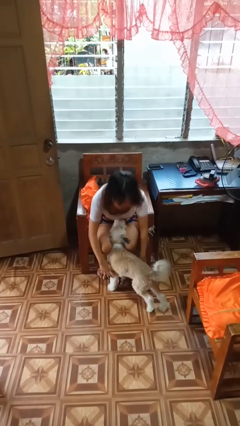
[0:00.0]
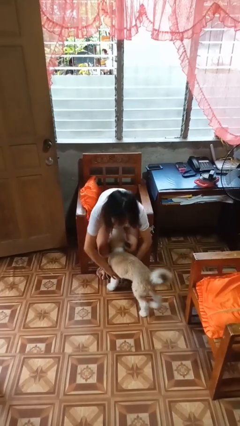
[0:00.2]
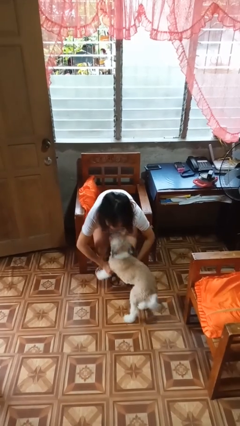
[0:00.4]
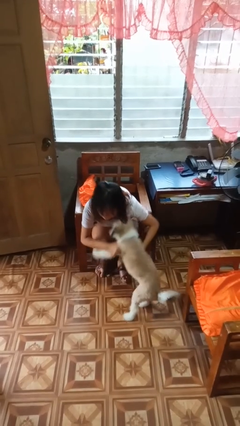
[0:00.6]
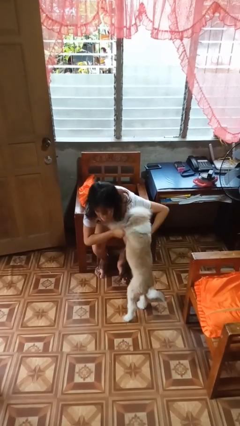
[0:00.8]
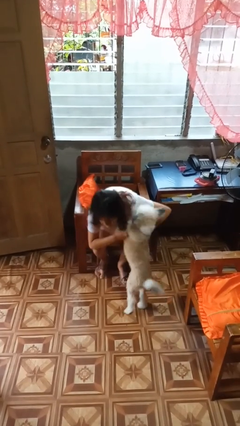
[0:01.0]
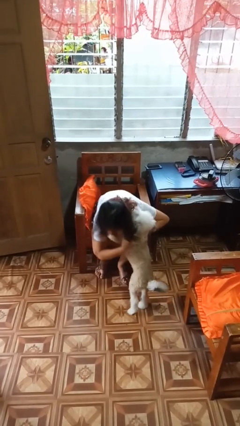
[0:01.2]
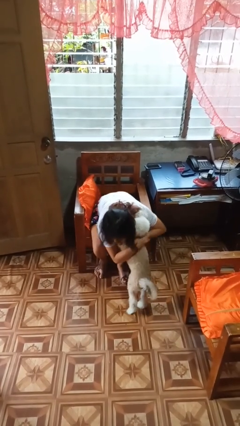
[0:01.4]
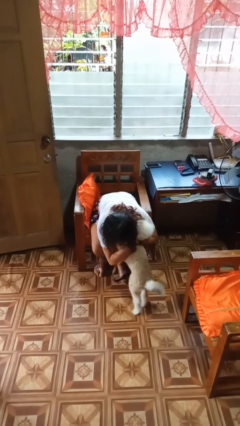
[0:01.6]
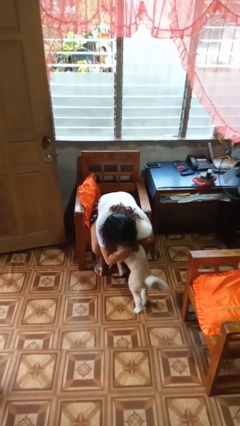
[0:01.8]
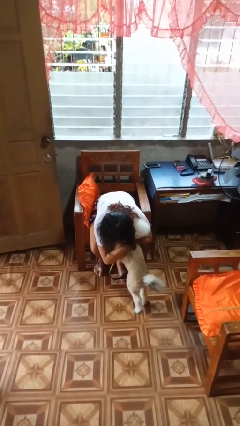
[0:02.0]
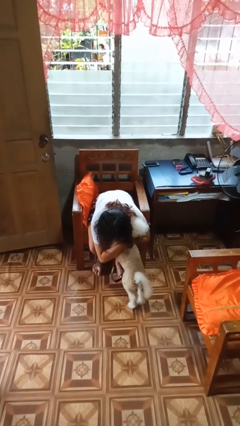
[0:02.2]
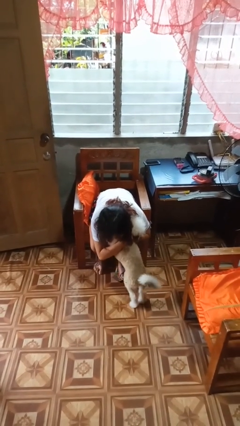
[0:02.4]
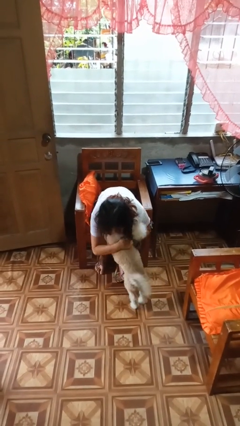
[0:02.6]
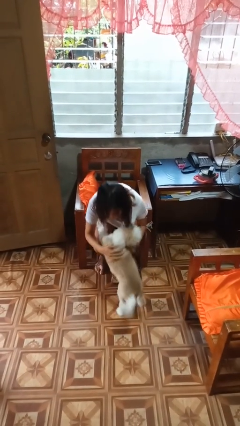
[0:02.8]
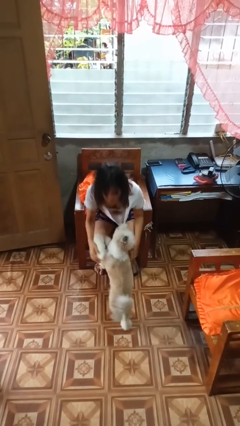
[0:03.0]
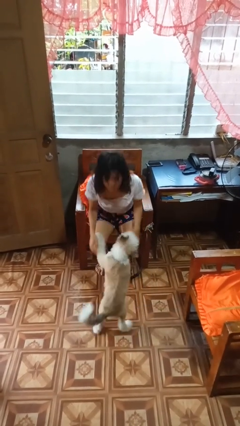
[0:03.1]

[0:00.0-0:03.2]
person hugs dog

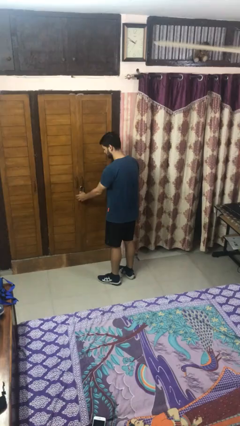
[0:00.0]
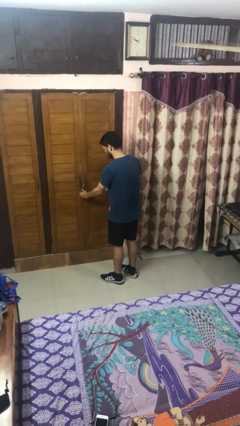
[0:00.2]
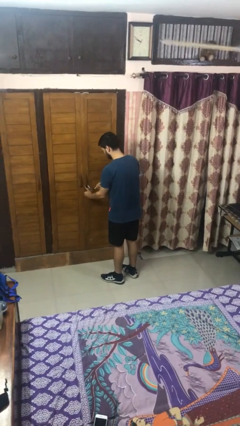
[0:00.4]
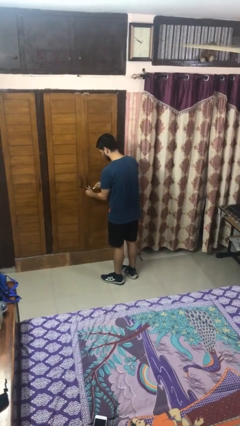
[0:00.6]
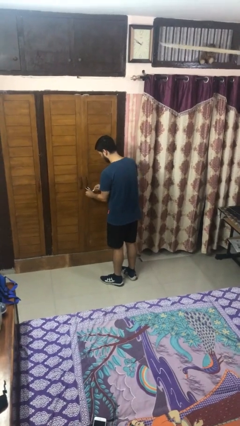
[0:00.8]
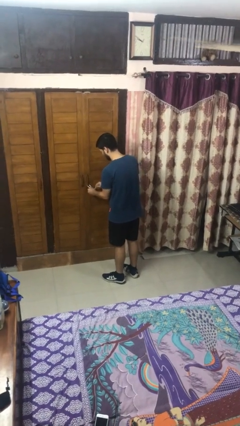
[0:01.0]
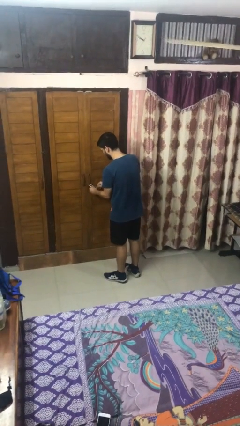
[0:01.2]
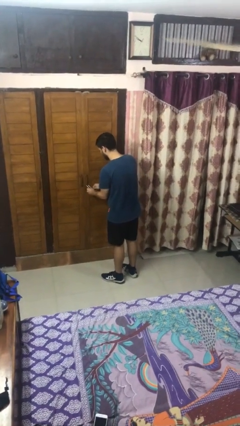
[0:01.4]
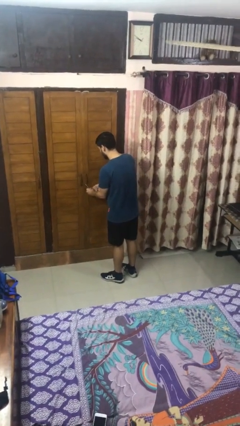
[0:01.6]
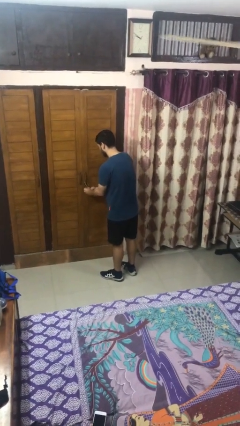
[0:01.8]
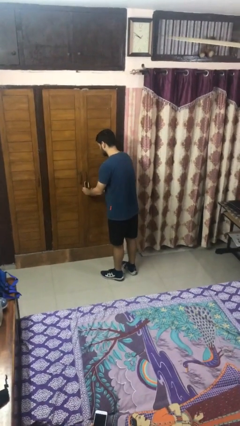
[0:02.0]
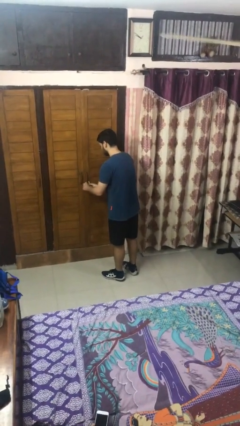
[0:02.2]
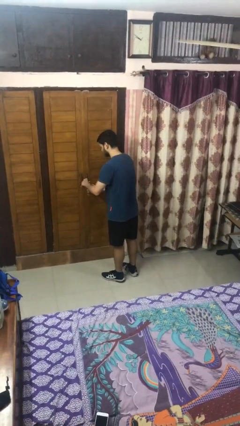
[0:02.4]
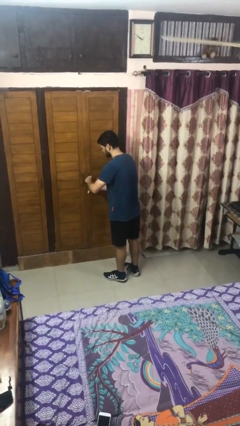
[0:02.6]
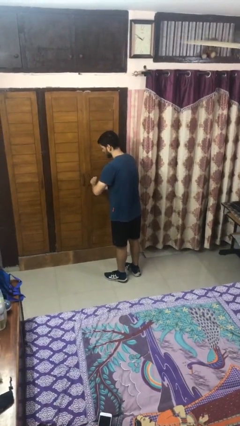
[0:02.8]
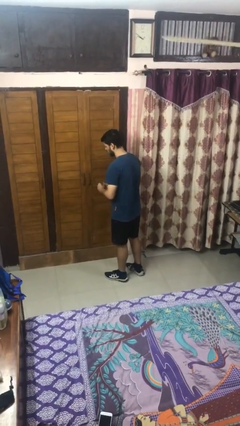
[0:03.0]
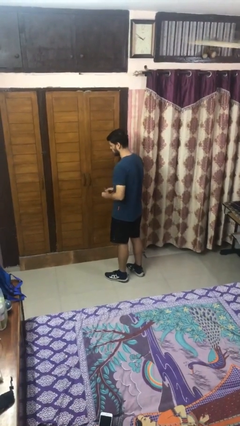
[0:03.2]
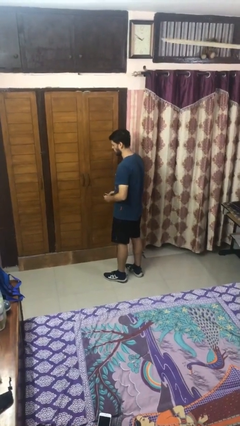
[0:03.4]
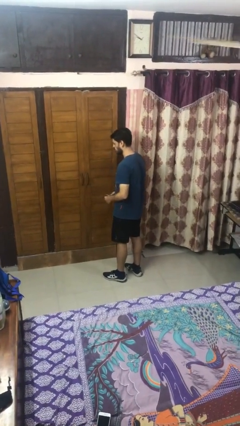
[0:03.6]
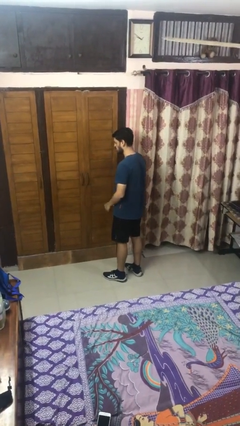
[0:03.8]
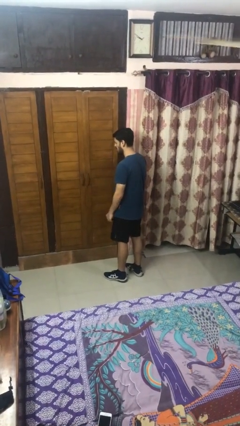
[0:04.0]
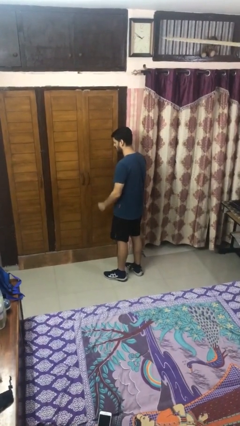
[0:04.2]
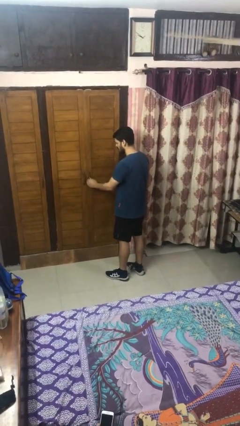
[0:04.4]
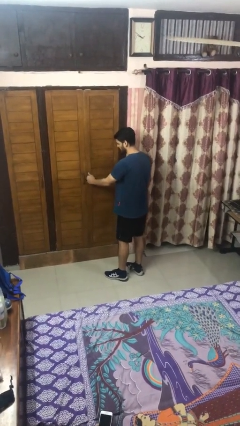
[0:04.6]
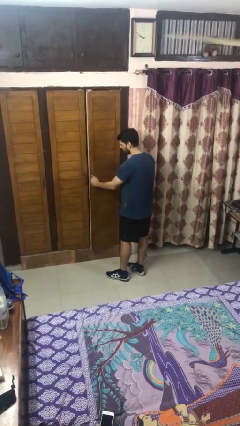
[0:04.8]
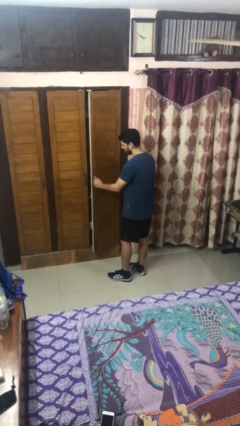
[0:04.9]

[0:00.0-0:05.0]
person unlocks door with keys

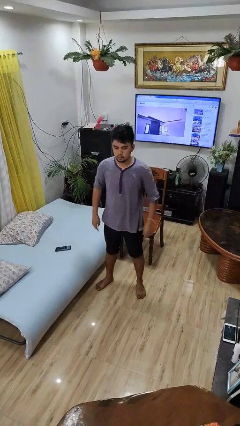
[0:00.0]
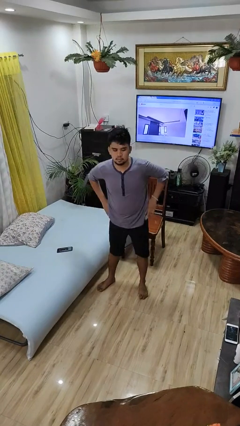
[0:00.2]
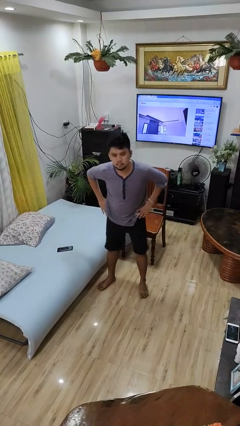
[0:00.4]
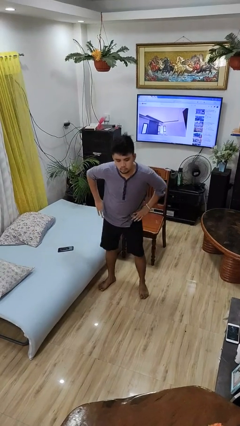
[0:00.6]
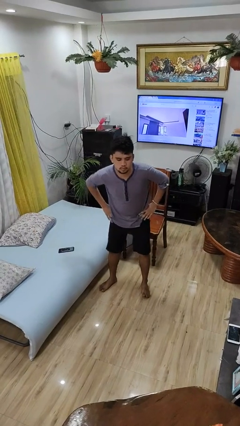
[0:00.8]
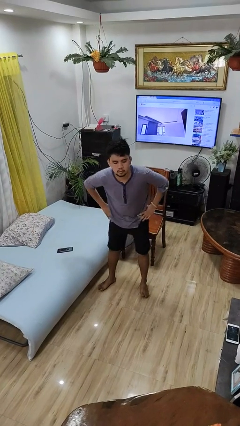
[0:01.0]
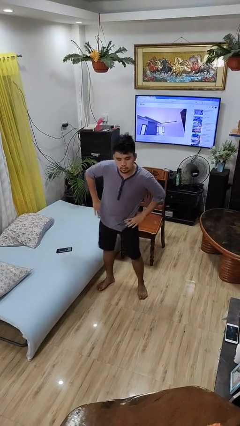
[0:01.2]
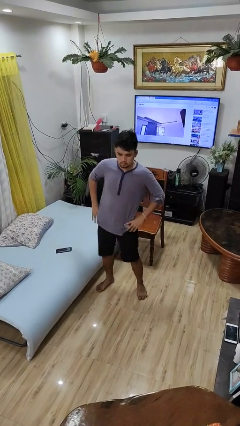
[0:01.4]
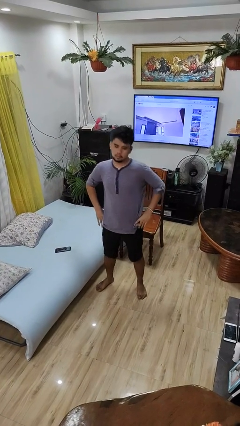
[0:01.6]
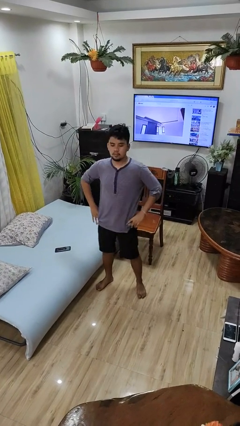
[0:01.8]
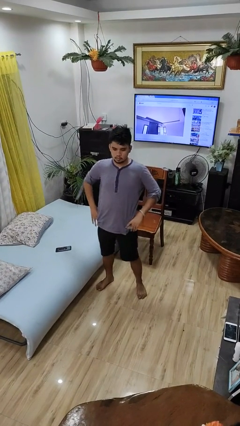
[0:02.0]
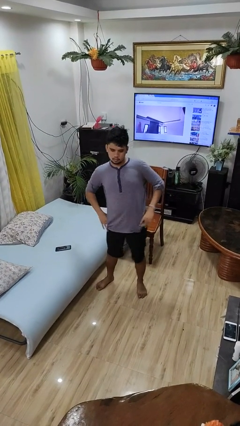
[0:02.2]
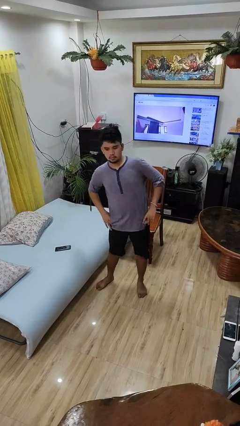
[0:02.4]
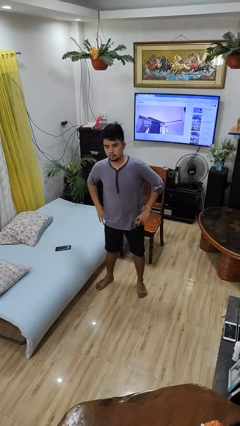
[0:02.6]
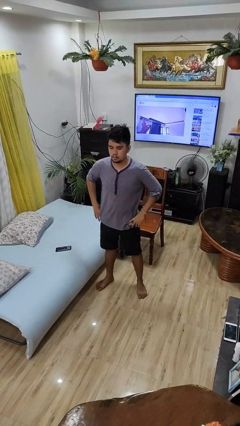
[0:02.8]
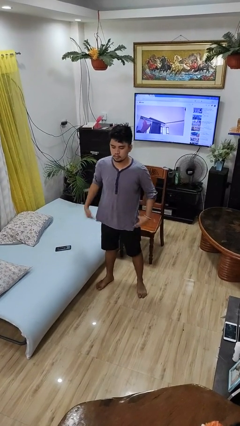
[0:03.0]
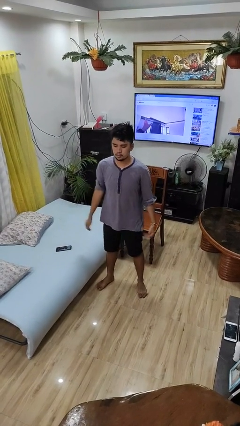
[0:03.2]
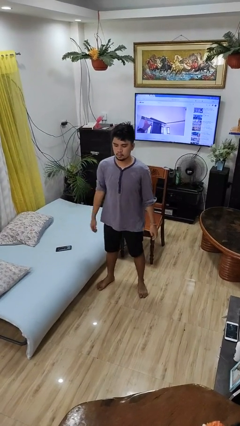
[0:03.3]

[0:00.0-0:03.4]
person wiggles hips

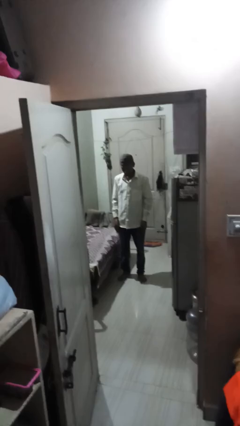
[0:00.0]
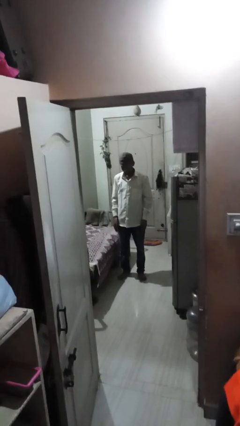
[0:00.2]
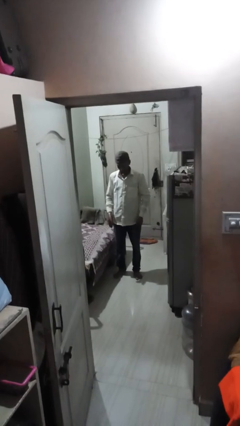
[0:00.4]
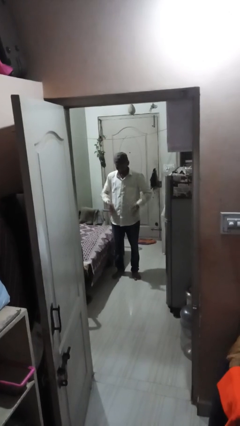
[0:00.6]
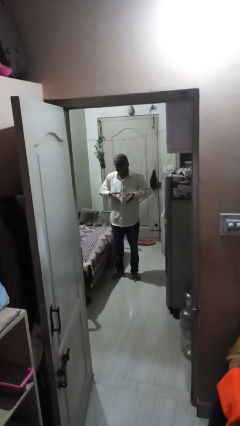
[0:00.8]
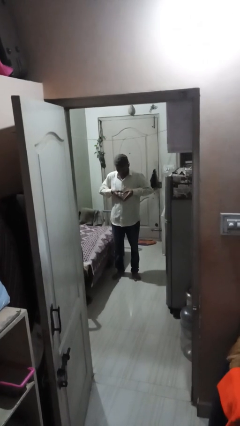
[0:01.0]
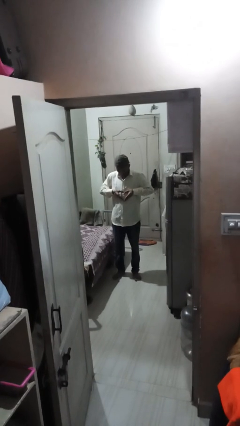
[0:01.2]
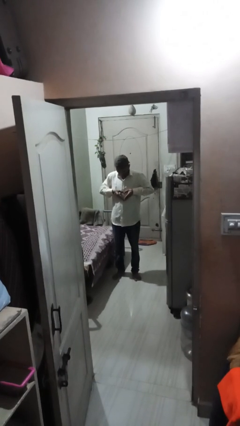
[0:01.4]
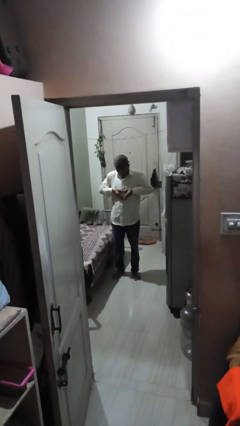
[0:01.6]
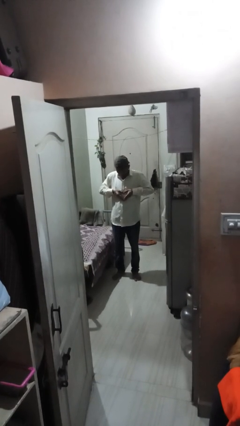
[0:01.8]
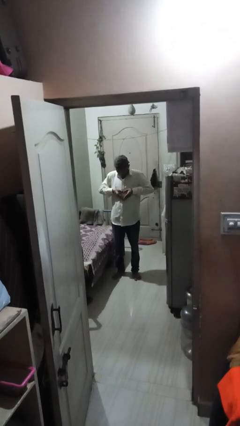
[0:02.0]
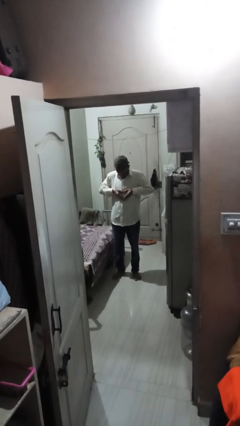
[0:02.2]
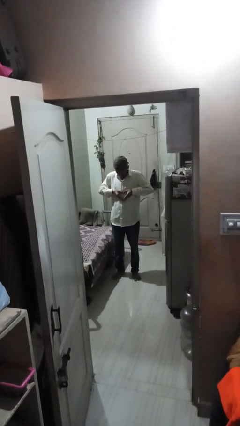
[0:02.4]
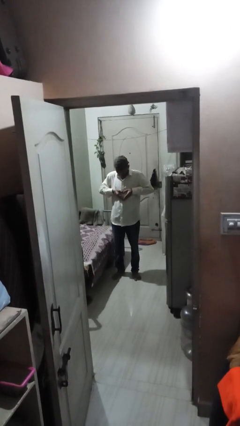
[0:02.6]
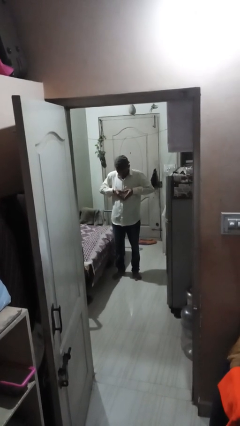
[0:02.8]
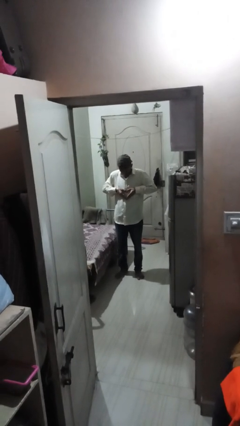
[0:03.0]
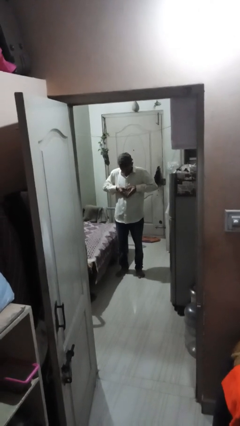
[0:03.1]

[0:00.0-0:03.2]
person gestures heart

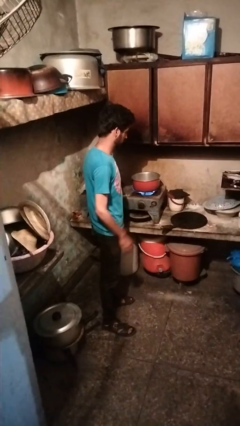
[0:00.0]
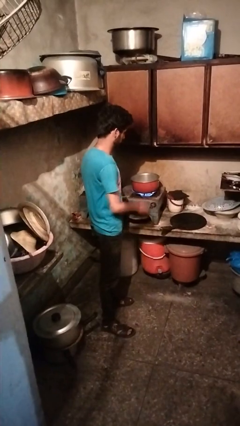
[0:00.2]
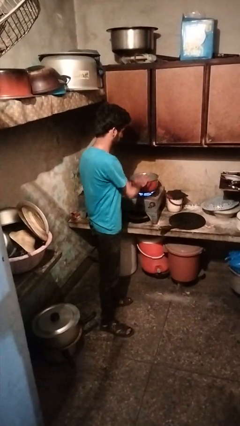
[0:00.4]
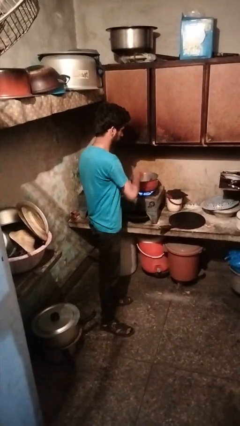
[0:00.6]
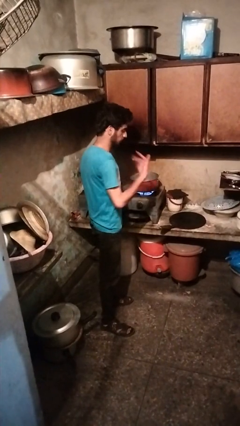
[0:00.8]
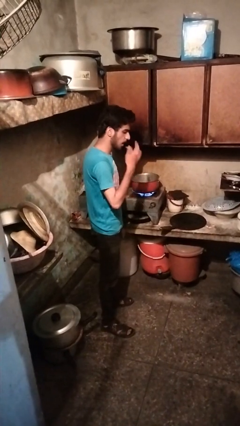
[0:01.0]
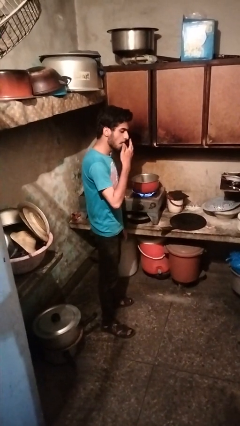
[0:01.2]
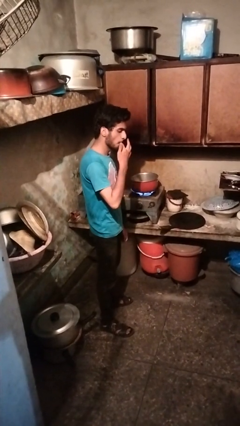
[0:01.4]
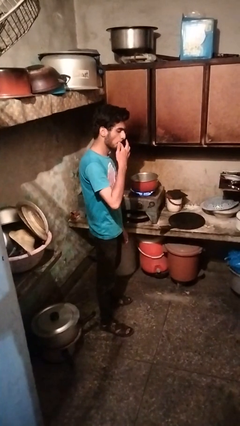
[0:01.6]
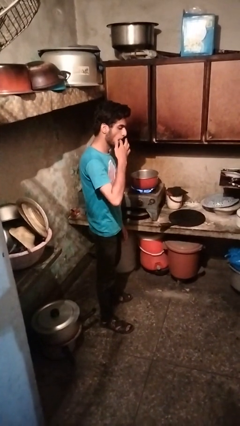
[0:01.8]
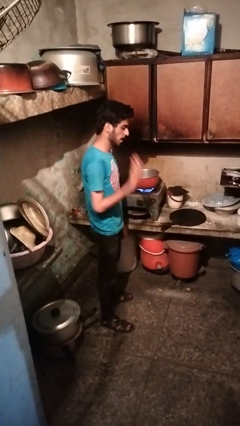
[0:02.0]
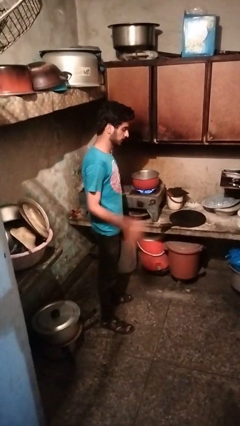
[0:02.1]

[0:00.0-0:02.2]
person burns hand

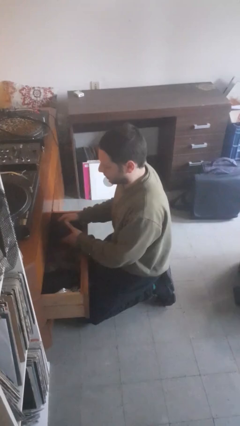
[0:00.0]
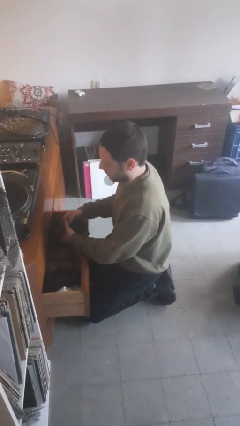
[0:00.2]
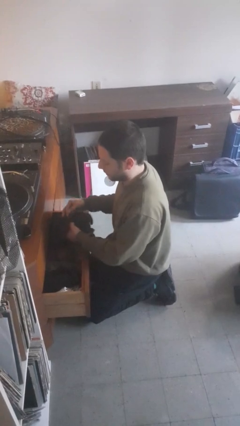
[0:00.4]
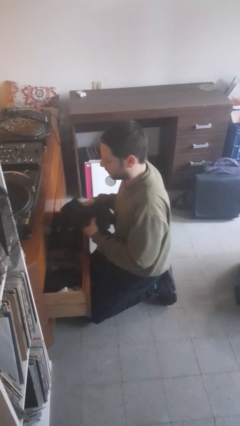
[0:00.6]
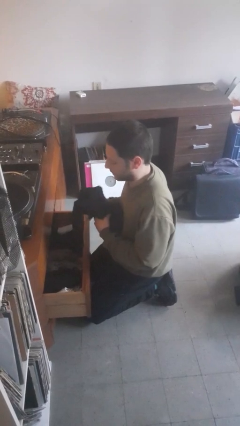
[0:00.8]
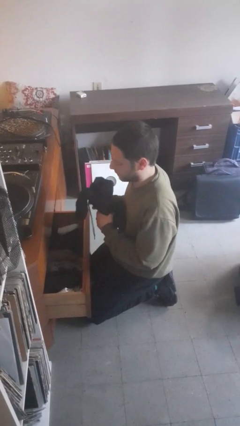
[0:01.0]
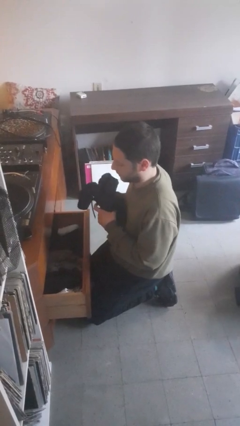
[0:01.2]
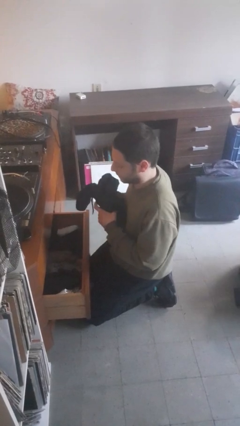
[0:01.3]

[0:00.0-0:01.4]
person takes clothes from dresser
